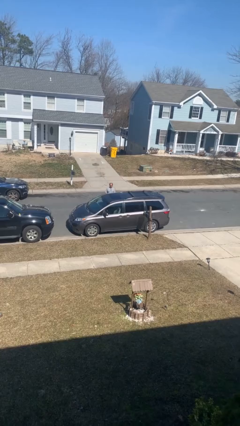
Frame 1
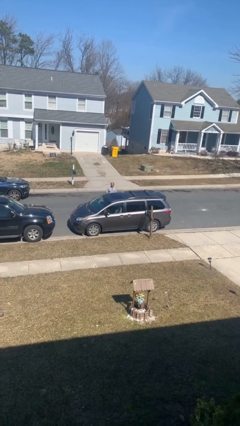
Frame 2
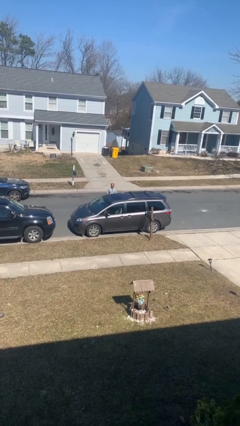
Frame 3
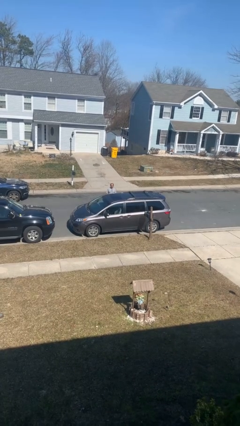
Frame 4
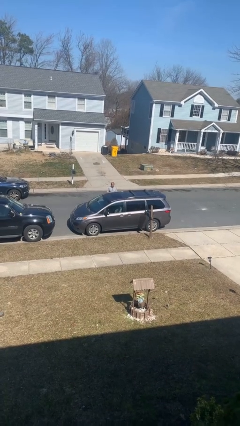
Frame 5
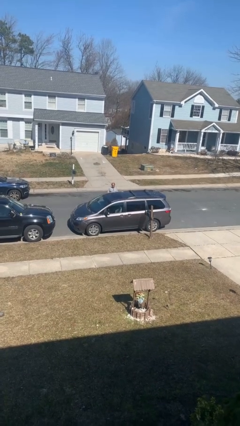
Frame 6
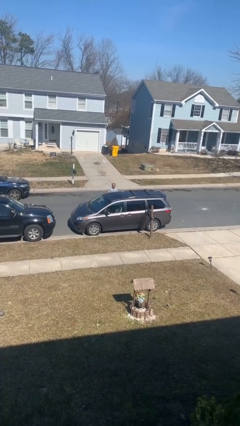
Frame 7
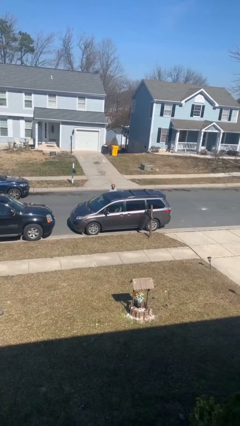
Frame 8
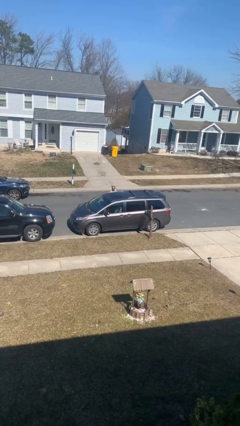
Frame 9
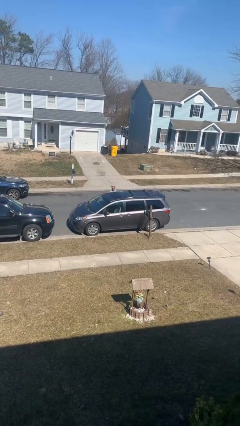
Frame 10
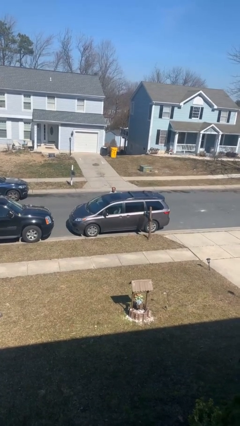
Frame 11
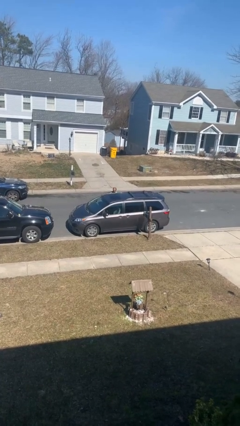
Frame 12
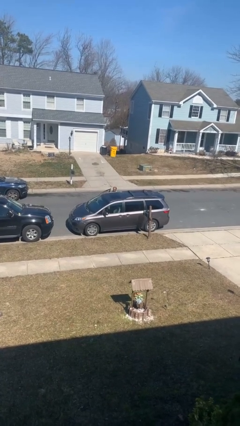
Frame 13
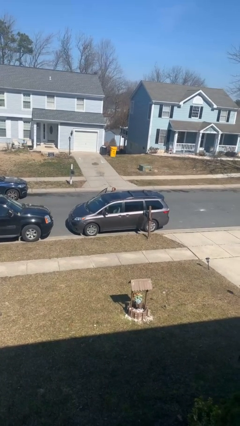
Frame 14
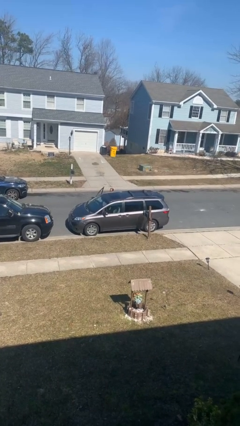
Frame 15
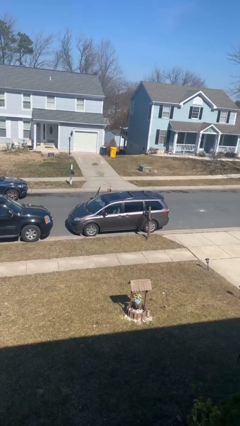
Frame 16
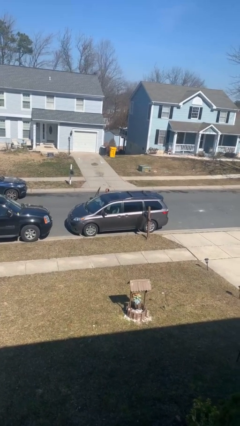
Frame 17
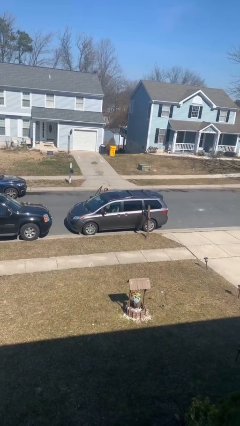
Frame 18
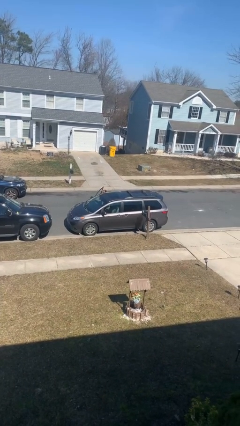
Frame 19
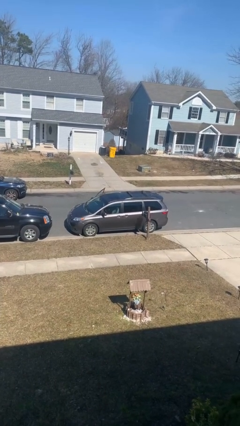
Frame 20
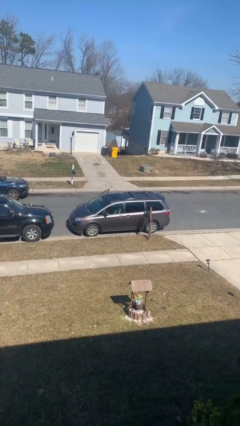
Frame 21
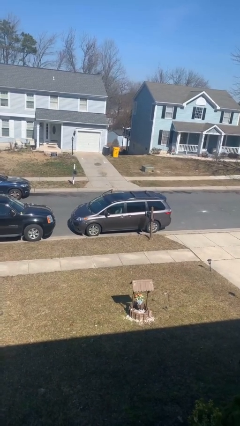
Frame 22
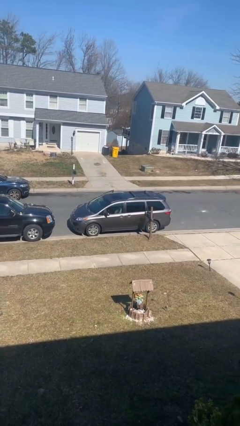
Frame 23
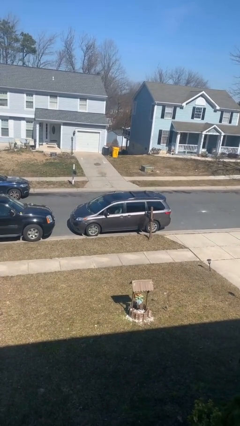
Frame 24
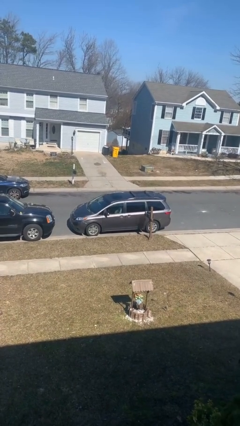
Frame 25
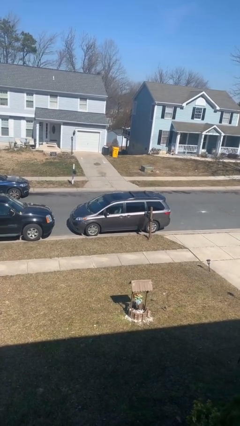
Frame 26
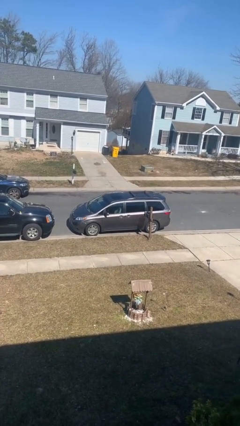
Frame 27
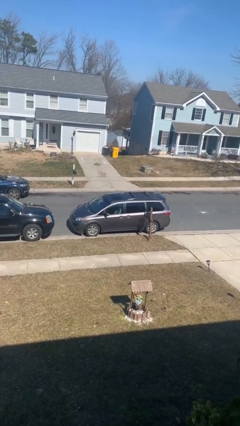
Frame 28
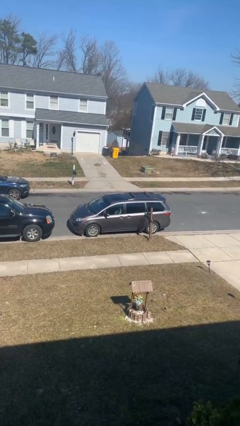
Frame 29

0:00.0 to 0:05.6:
car picks up person

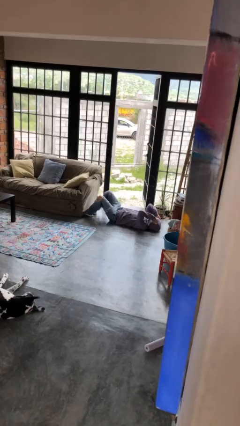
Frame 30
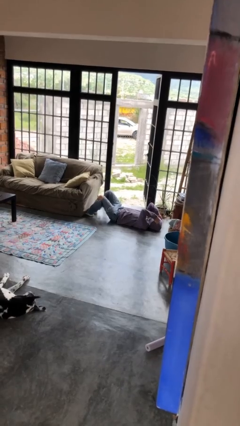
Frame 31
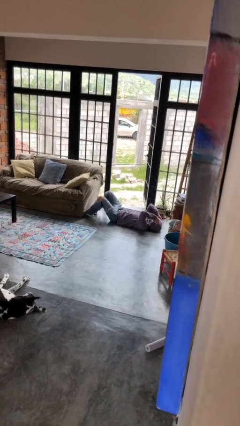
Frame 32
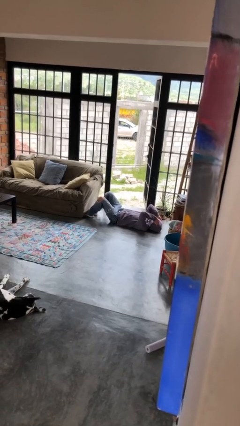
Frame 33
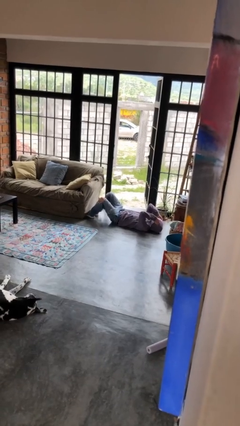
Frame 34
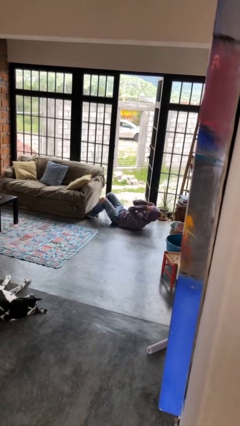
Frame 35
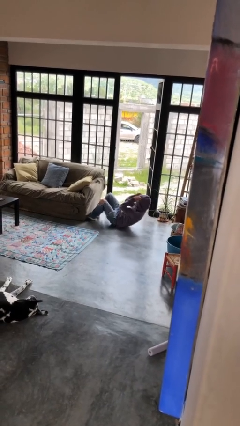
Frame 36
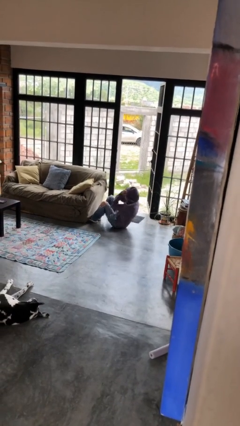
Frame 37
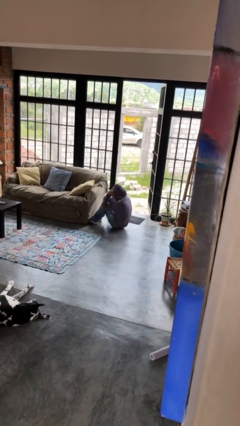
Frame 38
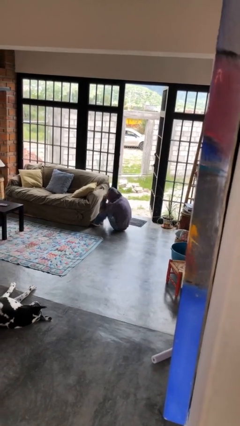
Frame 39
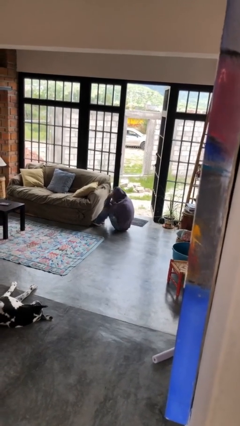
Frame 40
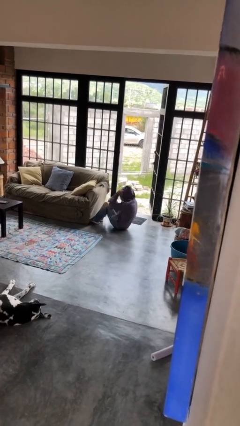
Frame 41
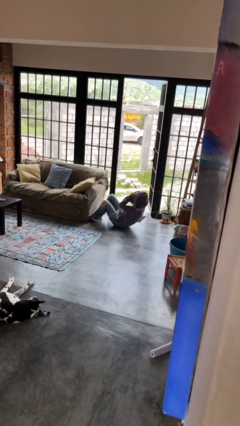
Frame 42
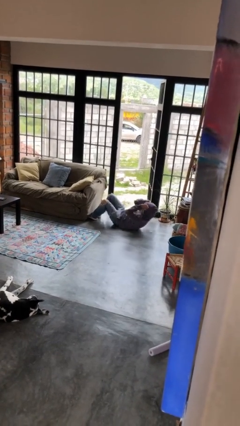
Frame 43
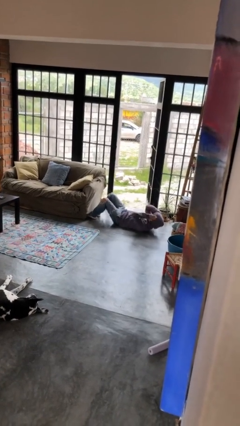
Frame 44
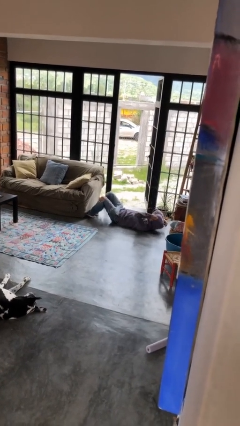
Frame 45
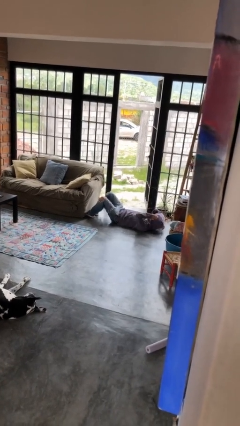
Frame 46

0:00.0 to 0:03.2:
person exercises with situp

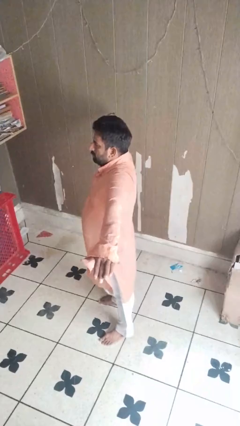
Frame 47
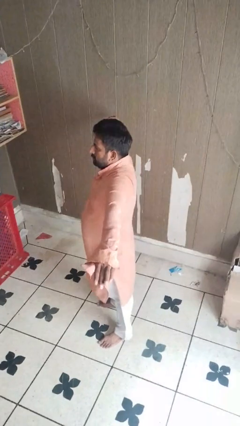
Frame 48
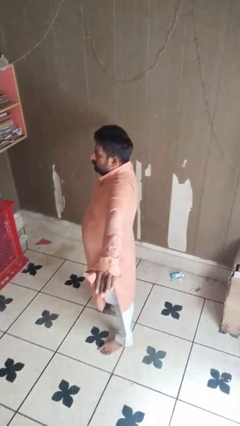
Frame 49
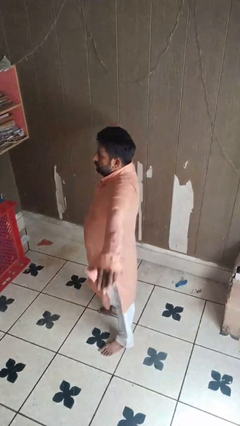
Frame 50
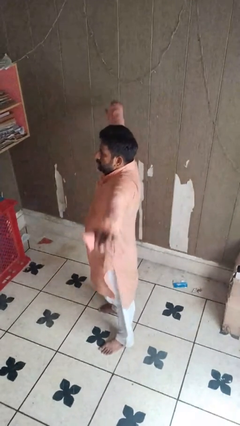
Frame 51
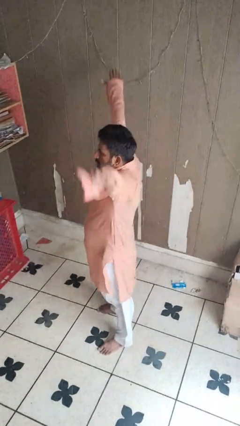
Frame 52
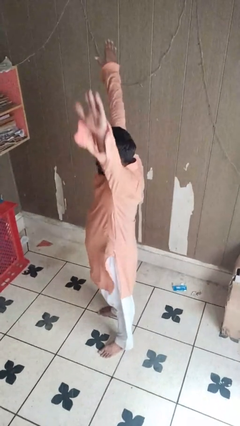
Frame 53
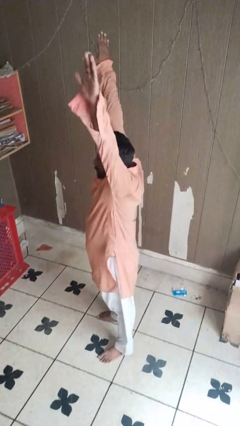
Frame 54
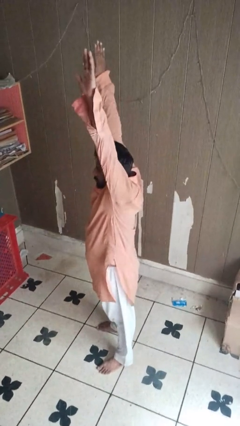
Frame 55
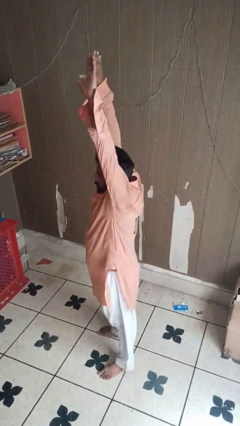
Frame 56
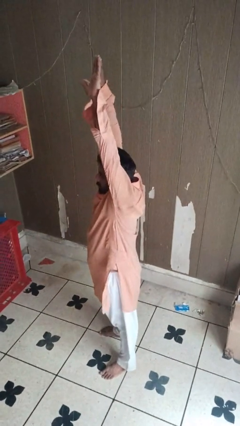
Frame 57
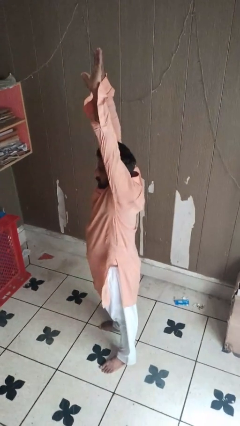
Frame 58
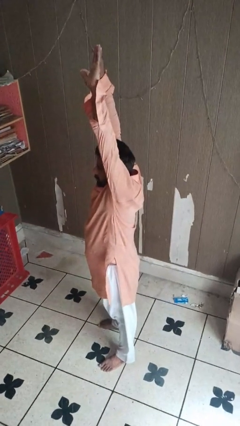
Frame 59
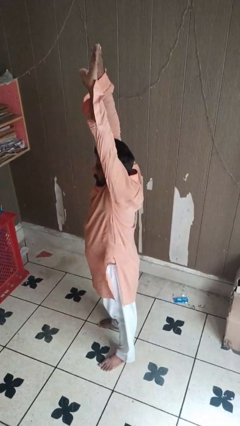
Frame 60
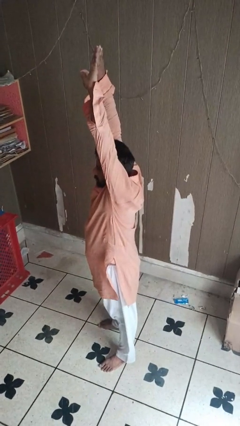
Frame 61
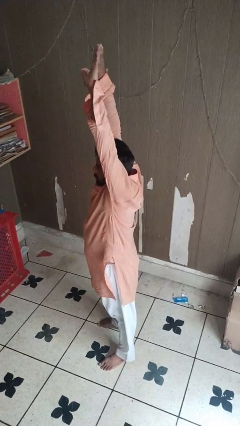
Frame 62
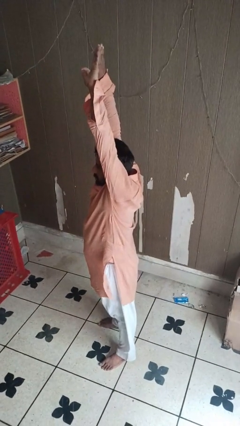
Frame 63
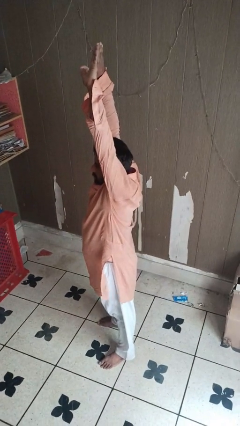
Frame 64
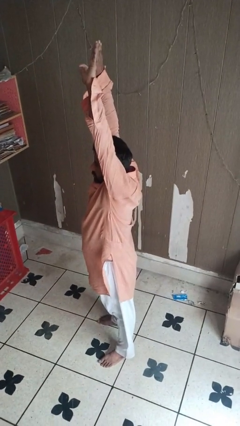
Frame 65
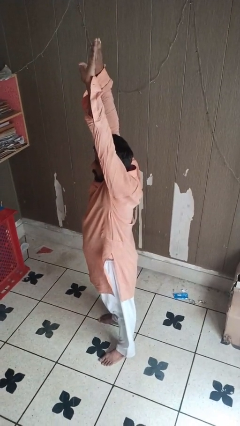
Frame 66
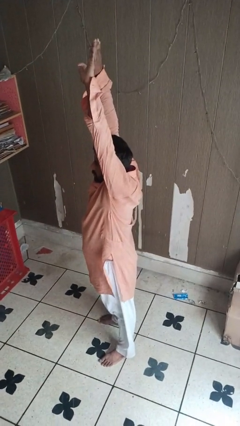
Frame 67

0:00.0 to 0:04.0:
person stretches arms over head

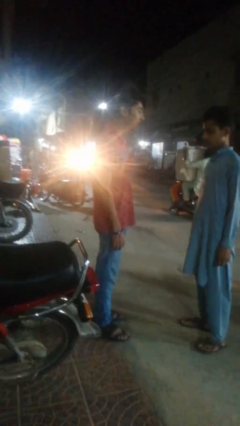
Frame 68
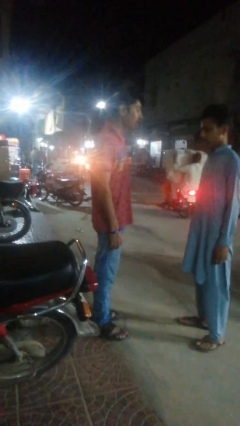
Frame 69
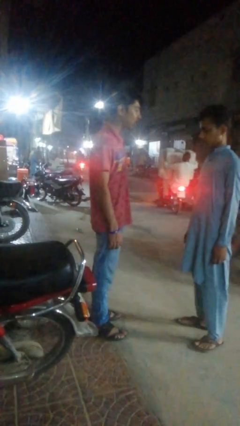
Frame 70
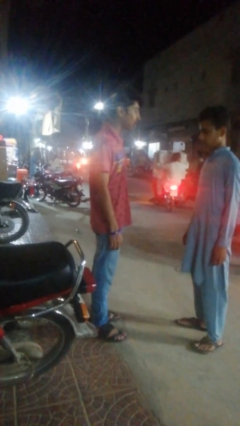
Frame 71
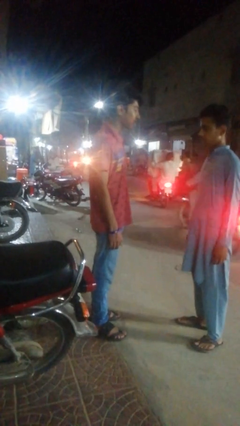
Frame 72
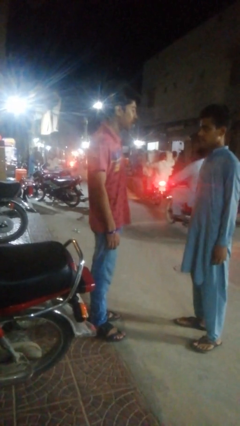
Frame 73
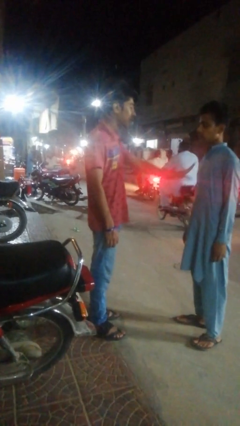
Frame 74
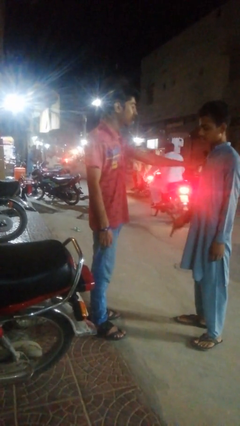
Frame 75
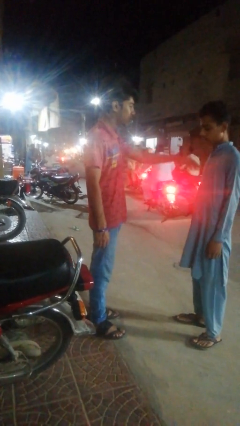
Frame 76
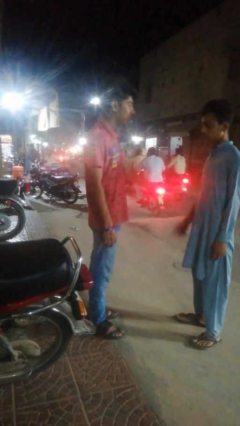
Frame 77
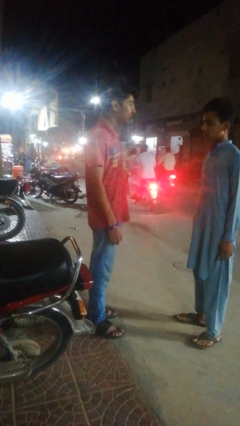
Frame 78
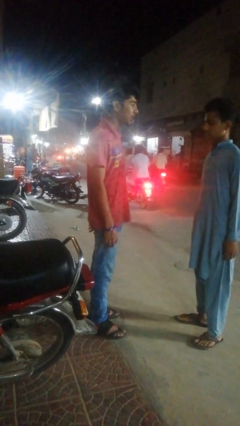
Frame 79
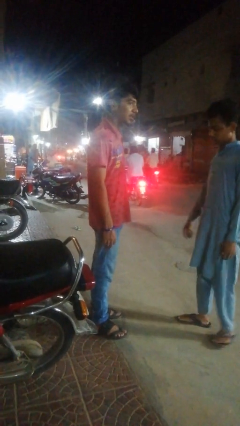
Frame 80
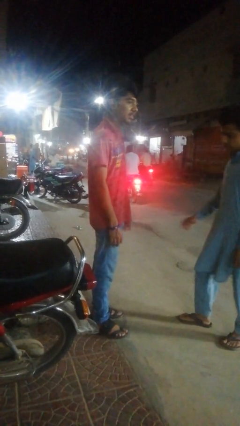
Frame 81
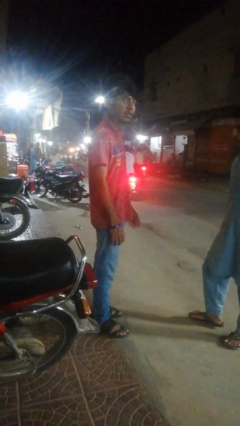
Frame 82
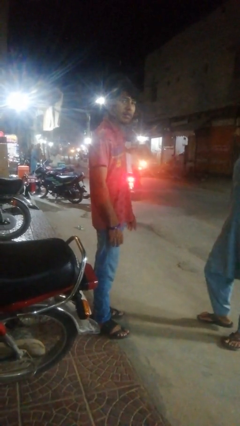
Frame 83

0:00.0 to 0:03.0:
person shoves person

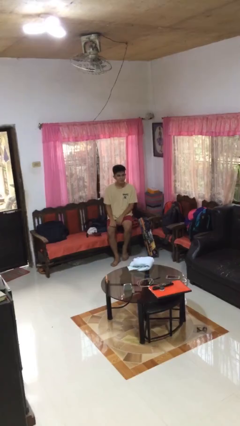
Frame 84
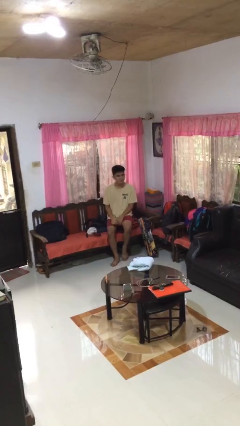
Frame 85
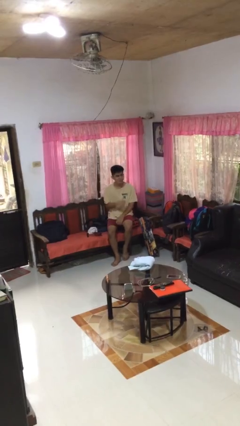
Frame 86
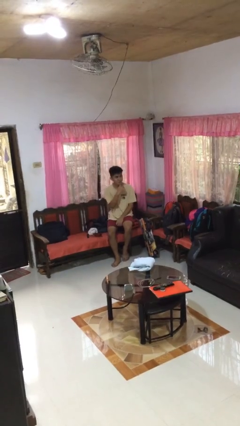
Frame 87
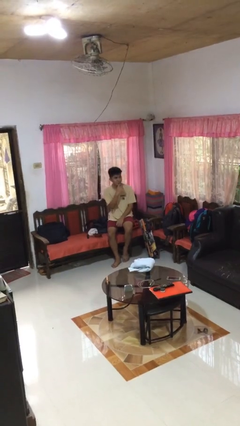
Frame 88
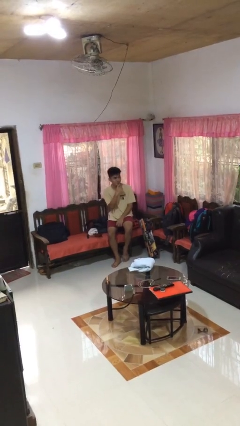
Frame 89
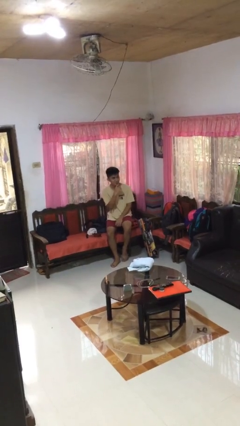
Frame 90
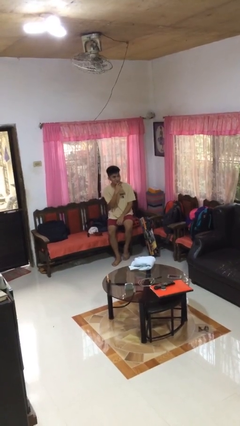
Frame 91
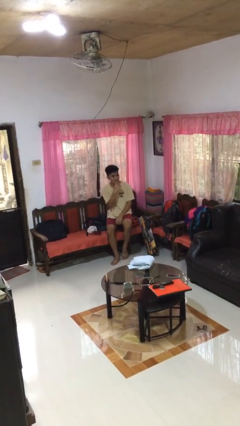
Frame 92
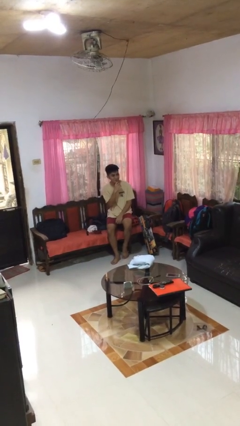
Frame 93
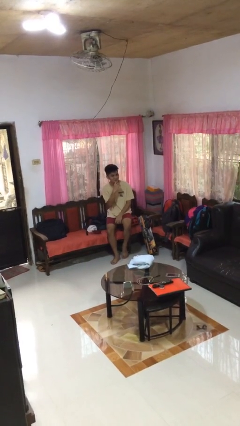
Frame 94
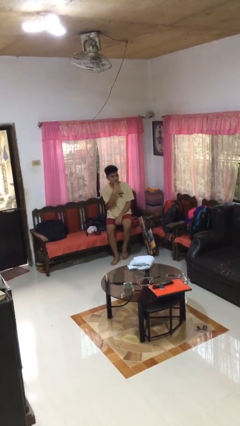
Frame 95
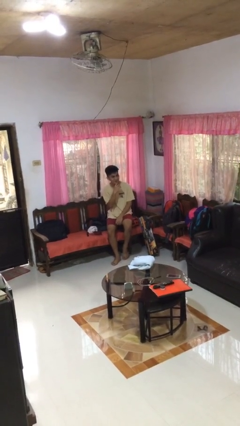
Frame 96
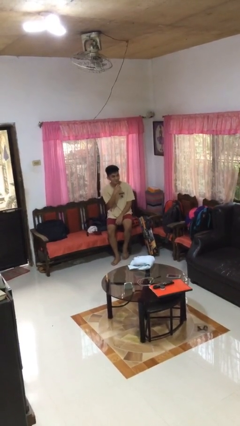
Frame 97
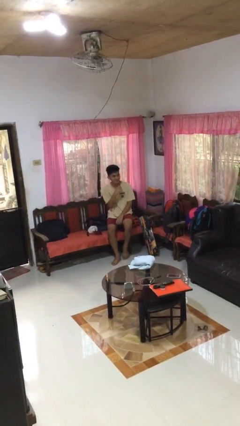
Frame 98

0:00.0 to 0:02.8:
person strokes chin
